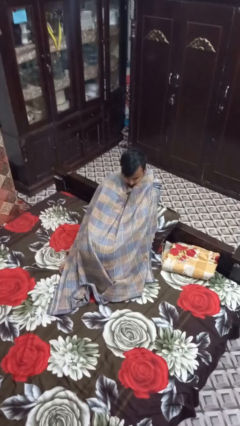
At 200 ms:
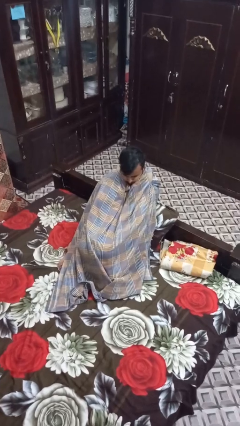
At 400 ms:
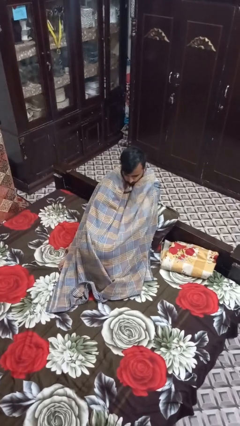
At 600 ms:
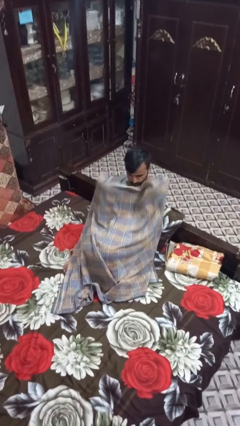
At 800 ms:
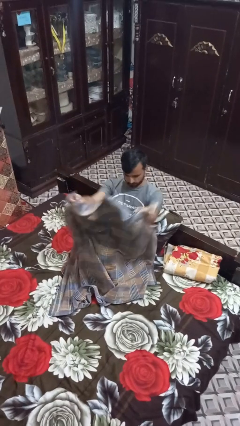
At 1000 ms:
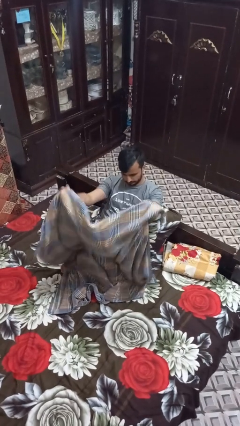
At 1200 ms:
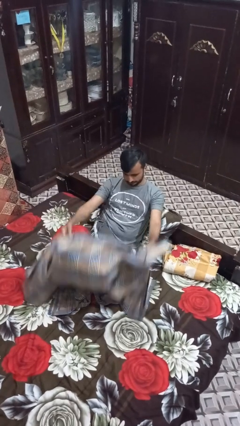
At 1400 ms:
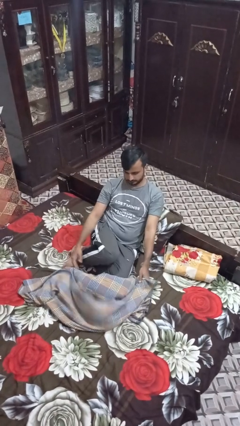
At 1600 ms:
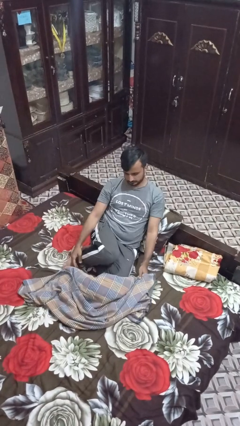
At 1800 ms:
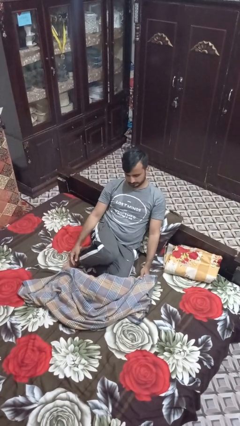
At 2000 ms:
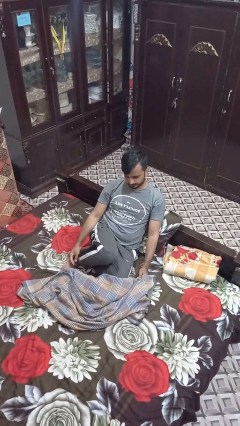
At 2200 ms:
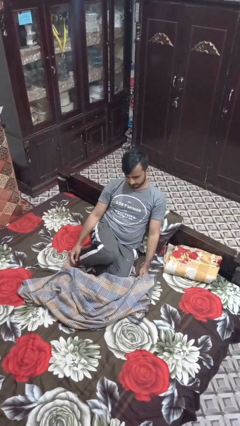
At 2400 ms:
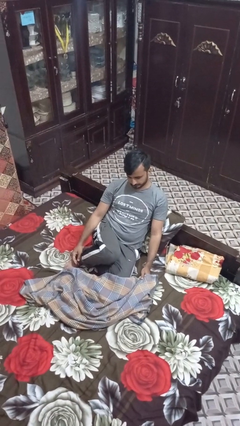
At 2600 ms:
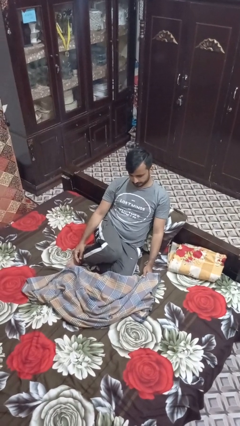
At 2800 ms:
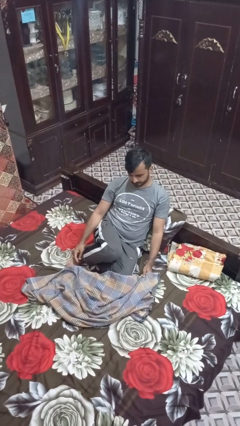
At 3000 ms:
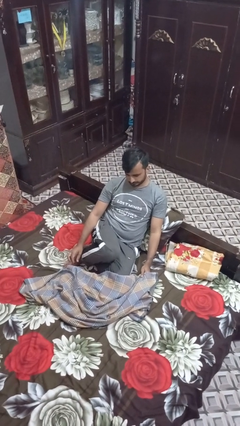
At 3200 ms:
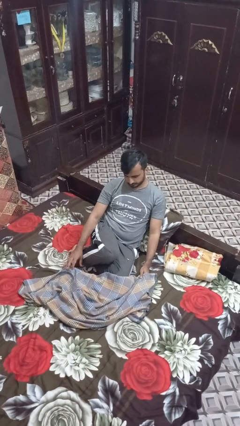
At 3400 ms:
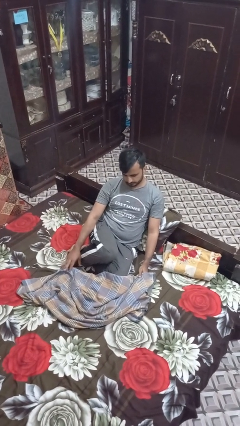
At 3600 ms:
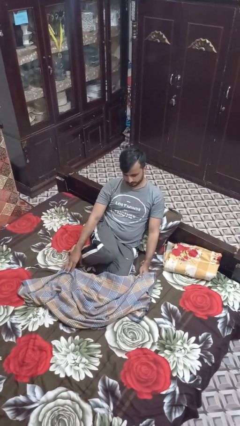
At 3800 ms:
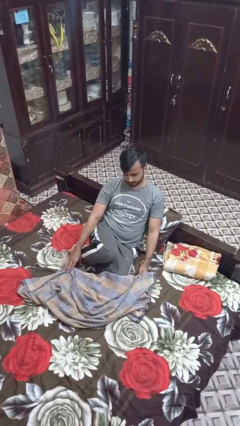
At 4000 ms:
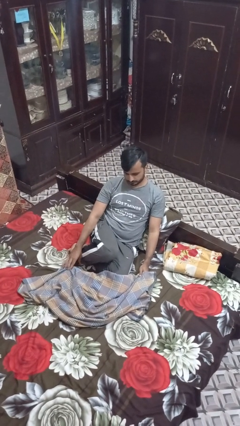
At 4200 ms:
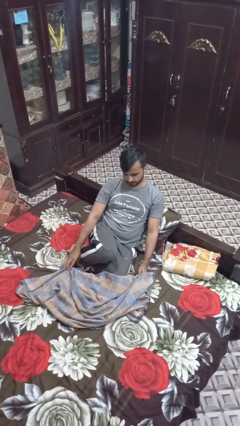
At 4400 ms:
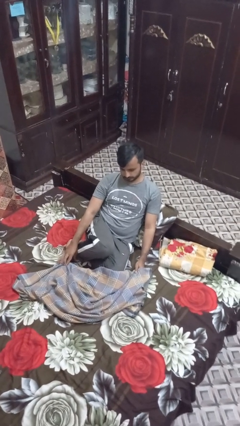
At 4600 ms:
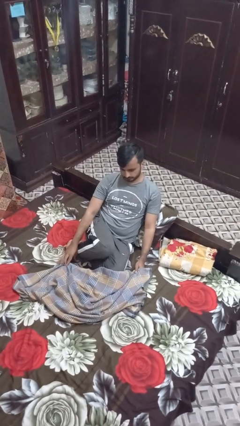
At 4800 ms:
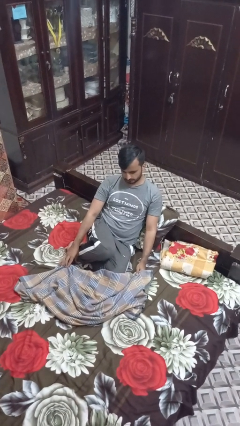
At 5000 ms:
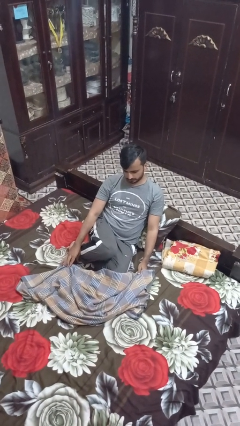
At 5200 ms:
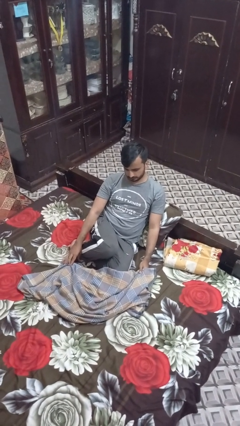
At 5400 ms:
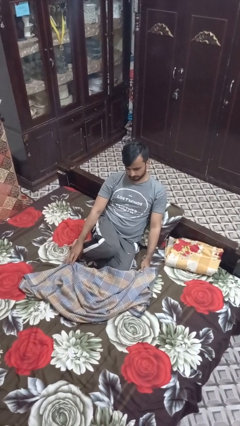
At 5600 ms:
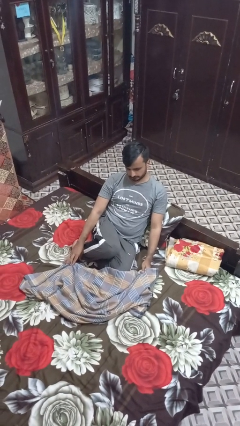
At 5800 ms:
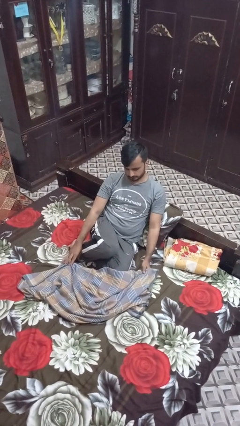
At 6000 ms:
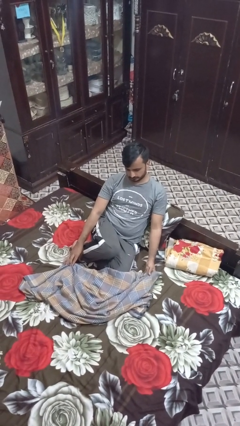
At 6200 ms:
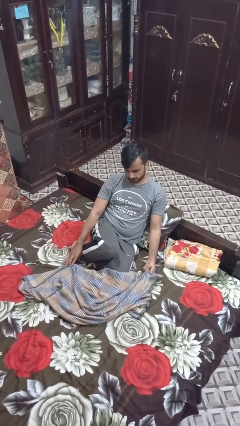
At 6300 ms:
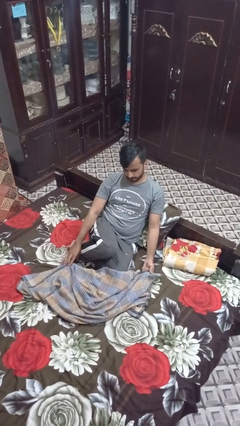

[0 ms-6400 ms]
person uncovers with blanket

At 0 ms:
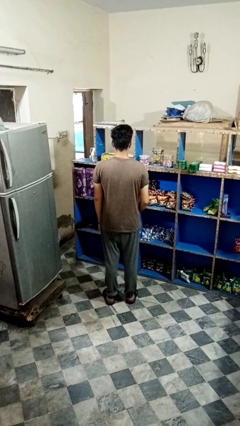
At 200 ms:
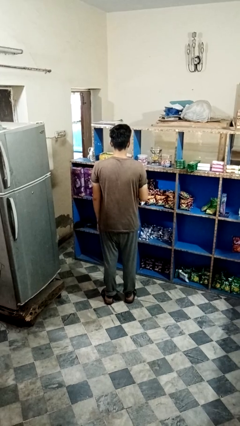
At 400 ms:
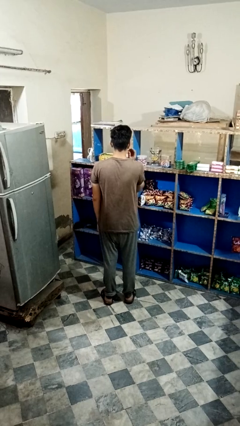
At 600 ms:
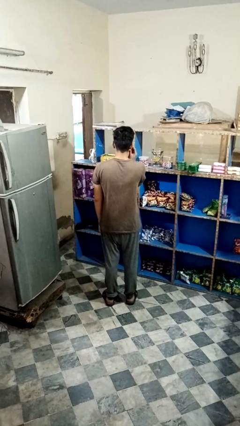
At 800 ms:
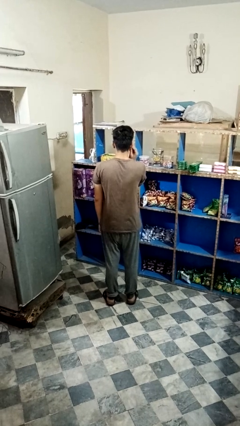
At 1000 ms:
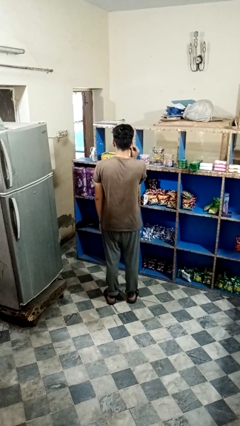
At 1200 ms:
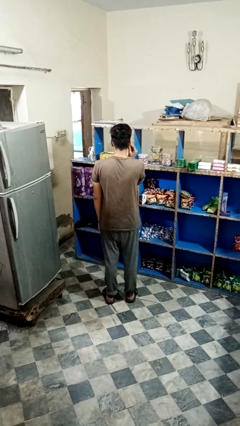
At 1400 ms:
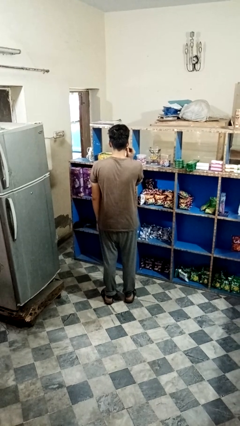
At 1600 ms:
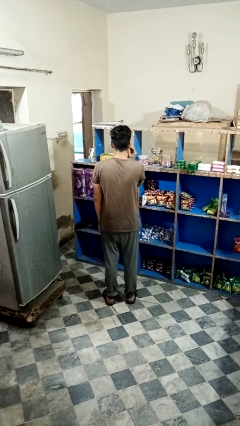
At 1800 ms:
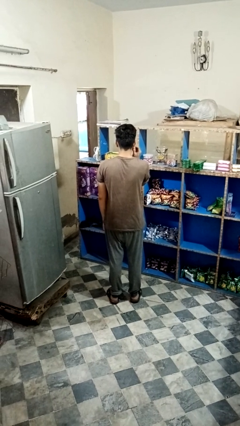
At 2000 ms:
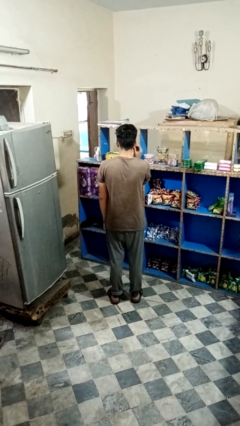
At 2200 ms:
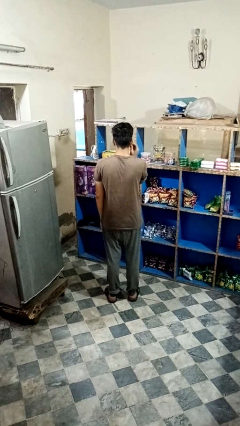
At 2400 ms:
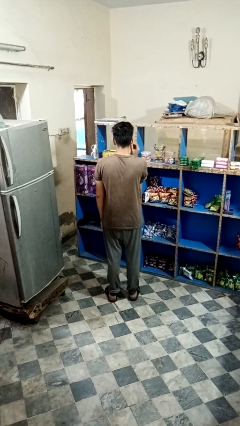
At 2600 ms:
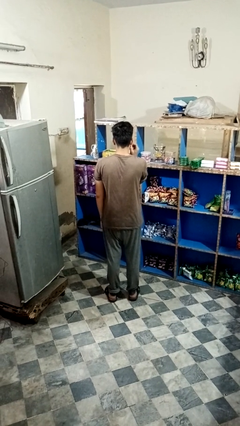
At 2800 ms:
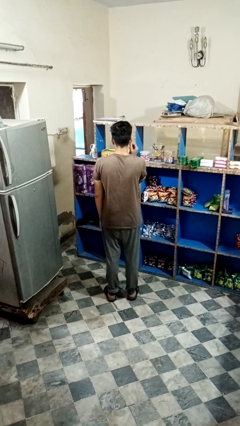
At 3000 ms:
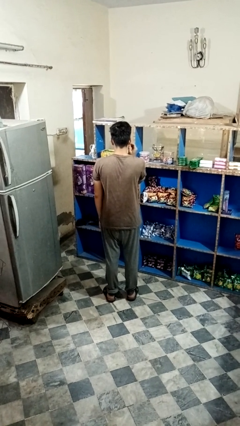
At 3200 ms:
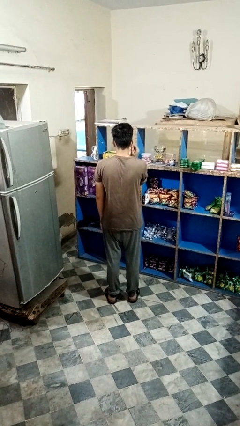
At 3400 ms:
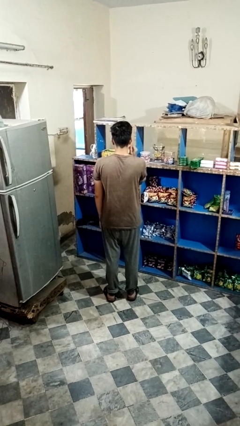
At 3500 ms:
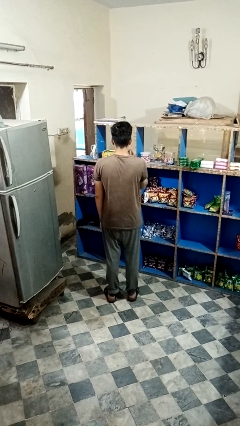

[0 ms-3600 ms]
person touches earlobe

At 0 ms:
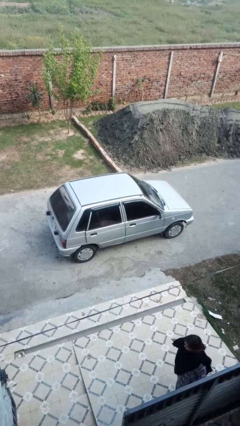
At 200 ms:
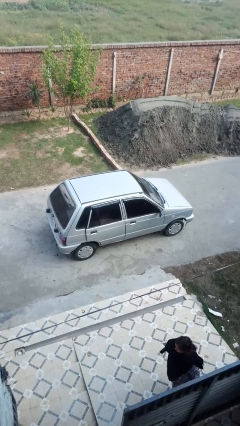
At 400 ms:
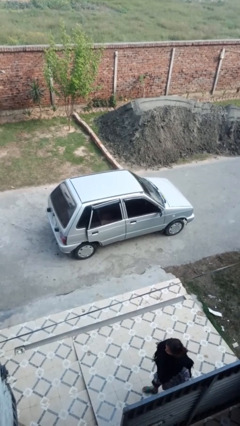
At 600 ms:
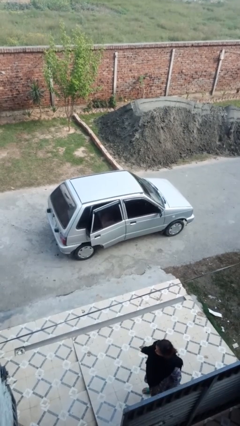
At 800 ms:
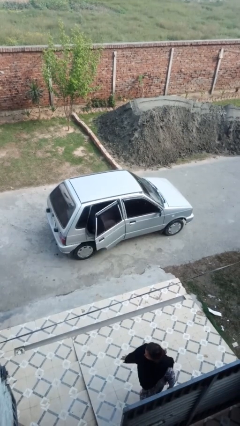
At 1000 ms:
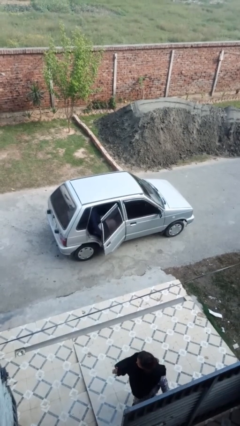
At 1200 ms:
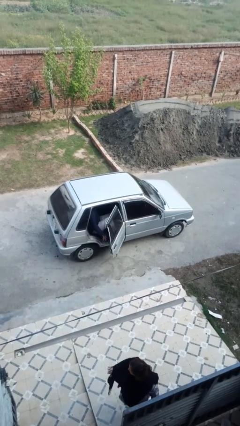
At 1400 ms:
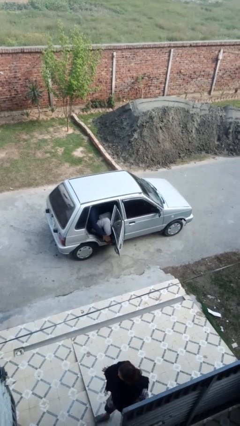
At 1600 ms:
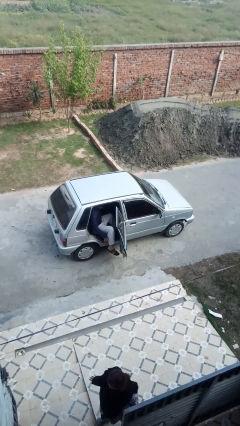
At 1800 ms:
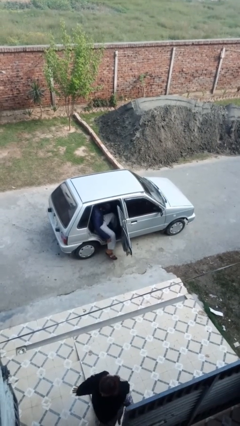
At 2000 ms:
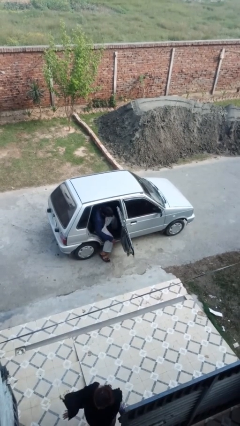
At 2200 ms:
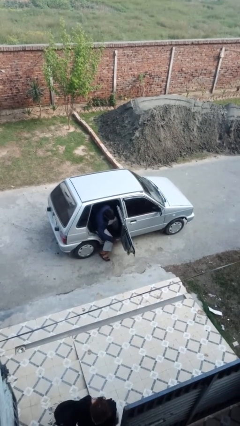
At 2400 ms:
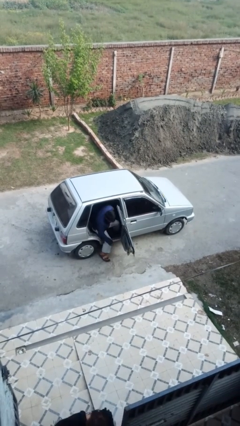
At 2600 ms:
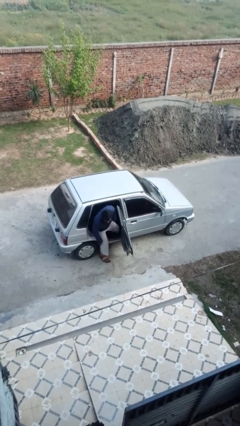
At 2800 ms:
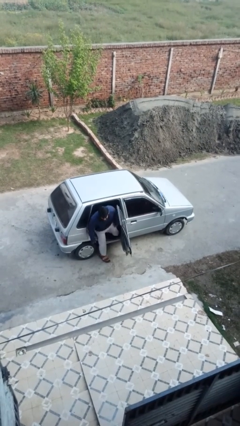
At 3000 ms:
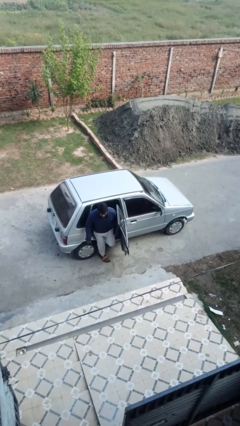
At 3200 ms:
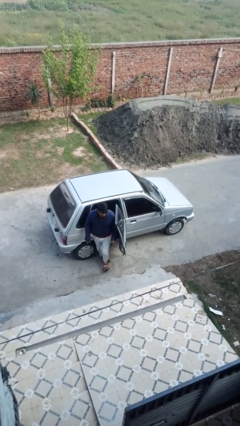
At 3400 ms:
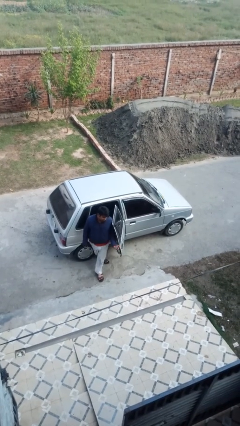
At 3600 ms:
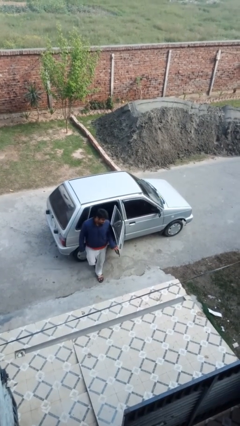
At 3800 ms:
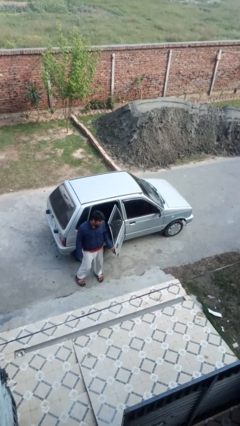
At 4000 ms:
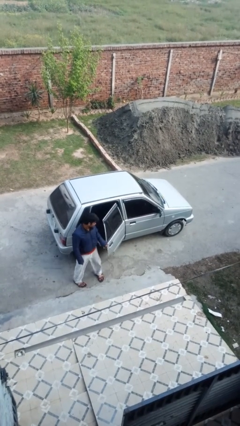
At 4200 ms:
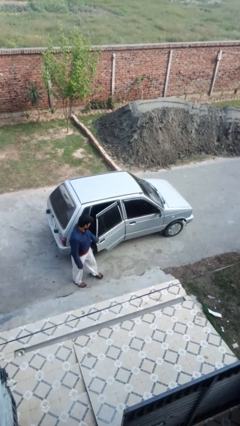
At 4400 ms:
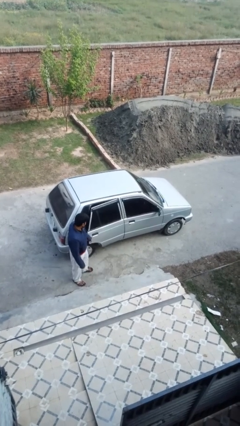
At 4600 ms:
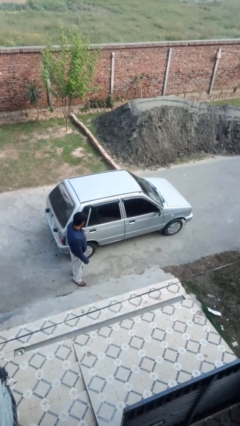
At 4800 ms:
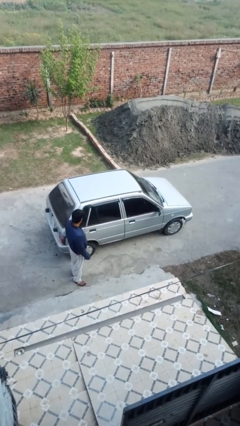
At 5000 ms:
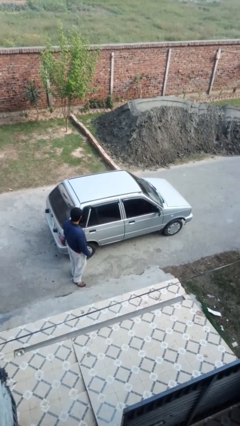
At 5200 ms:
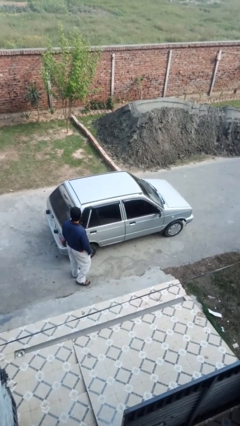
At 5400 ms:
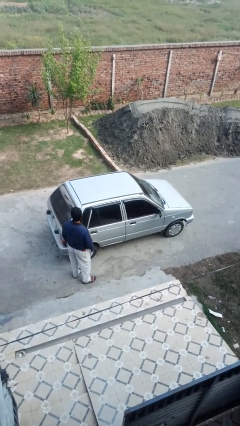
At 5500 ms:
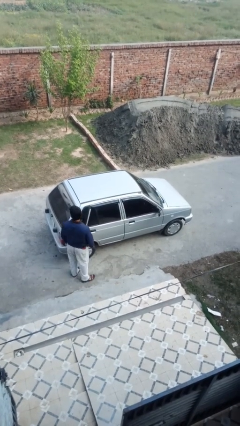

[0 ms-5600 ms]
car drops off person

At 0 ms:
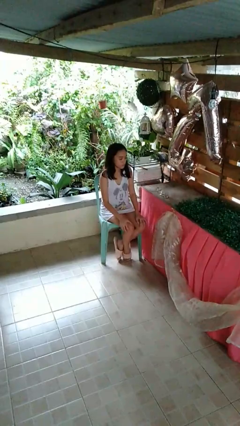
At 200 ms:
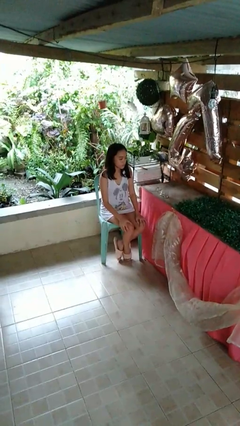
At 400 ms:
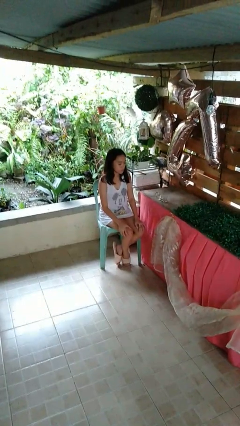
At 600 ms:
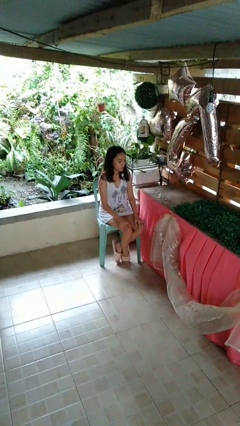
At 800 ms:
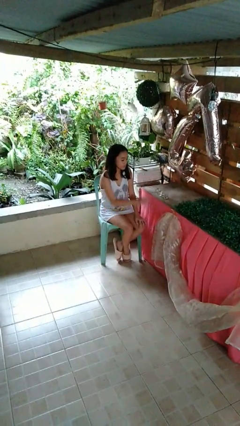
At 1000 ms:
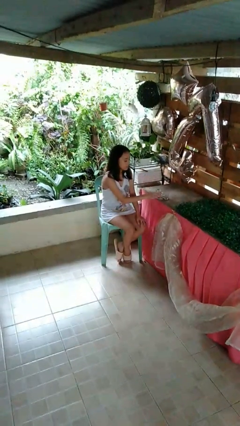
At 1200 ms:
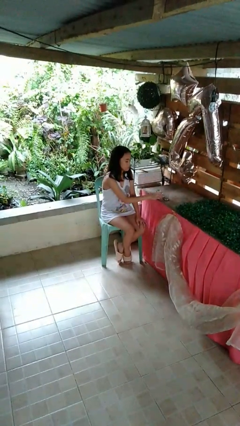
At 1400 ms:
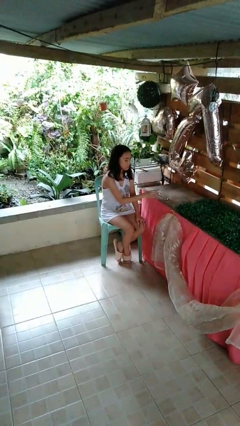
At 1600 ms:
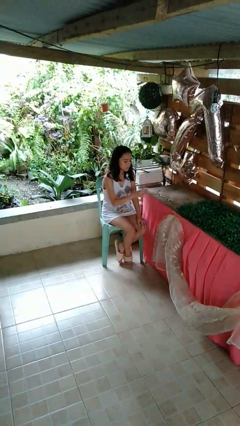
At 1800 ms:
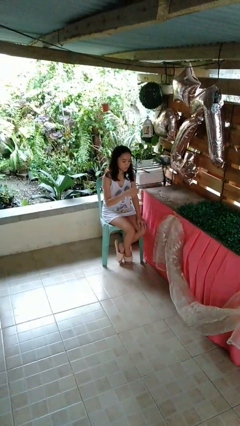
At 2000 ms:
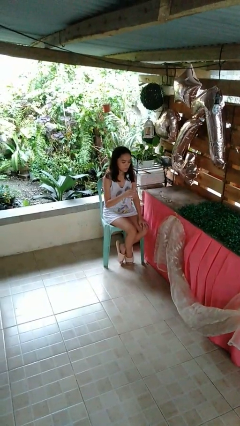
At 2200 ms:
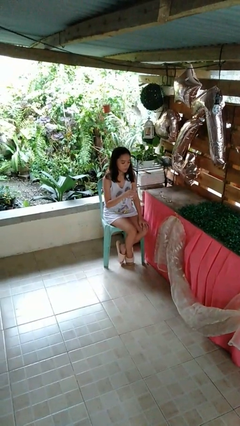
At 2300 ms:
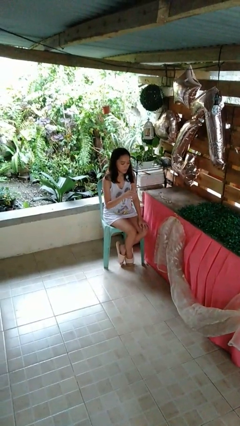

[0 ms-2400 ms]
person picks up object from table

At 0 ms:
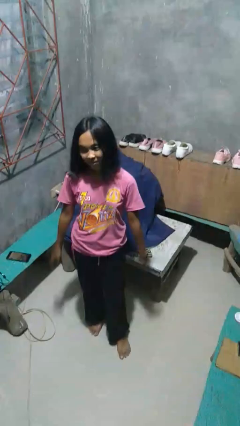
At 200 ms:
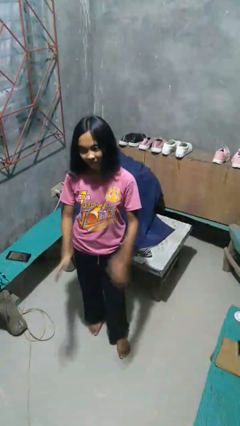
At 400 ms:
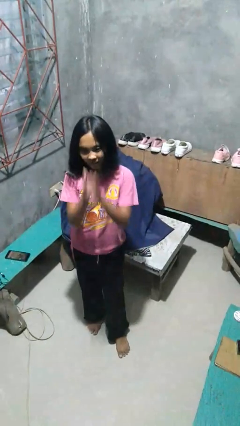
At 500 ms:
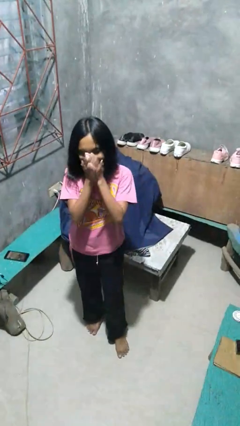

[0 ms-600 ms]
person yawns
